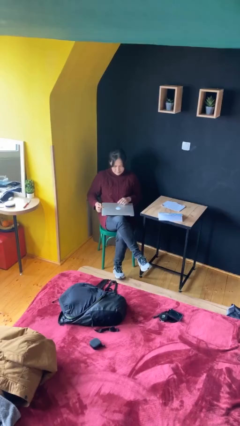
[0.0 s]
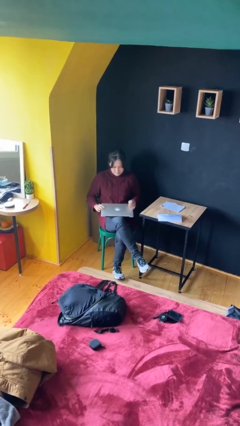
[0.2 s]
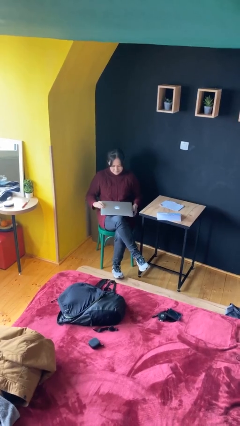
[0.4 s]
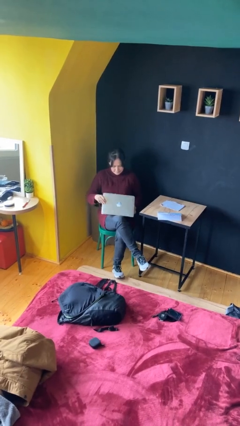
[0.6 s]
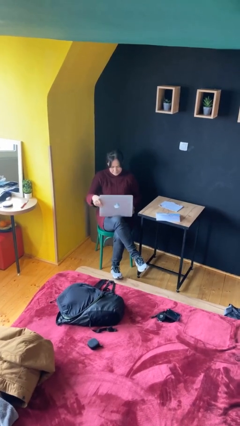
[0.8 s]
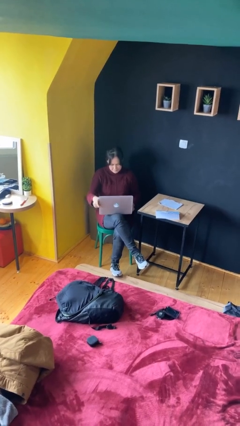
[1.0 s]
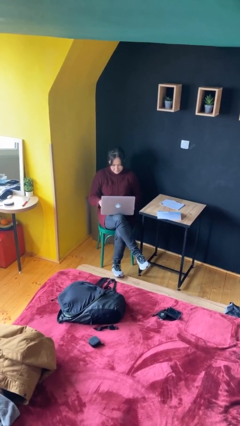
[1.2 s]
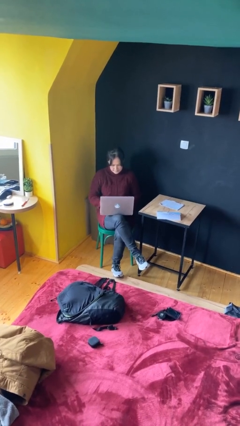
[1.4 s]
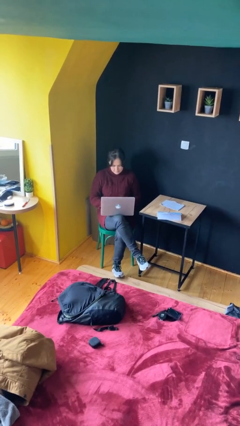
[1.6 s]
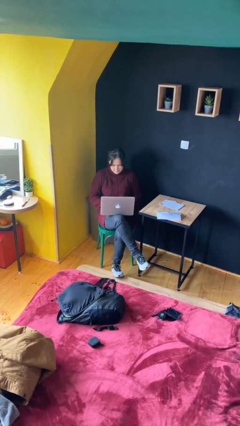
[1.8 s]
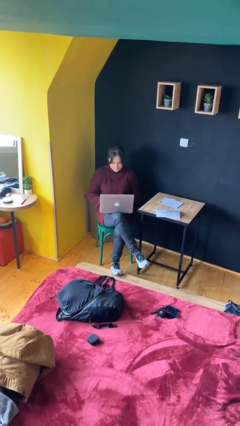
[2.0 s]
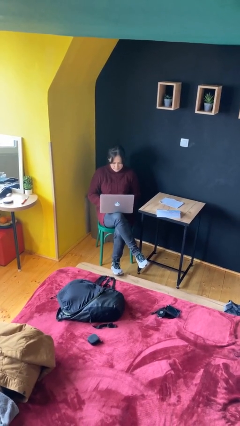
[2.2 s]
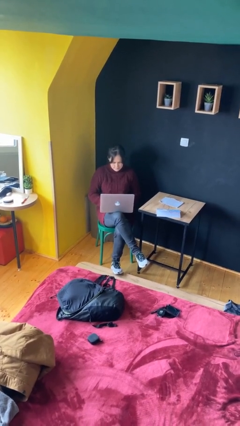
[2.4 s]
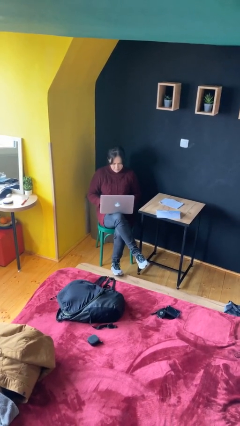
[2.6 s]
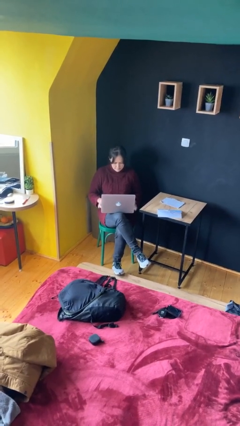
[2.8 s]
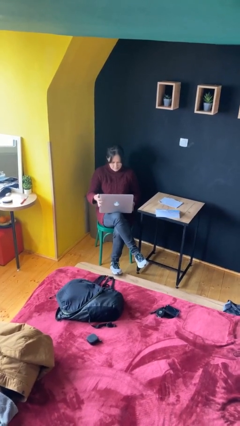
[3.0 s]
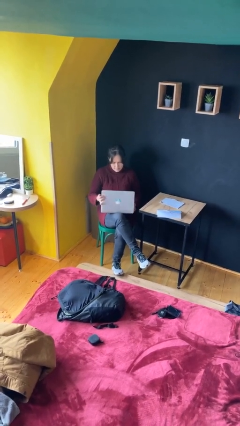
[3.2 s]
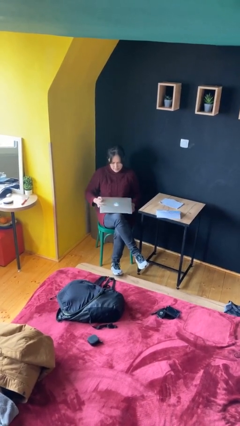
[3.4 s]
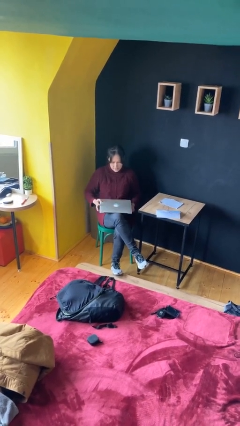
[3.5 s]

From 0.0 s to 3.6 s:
person interacts with laptop

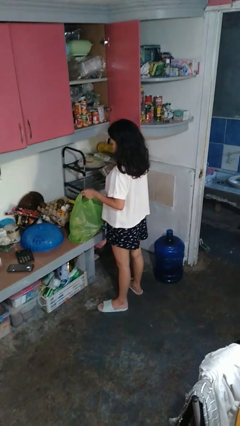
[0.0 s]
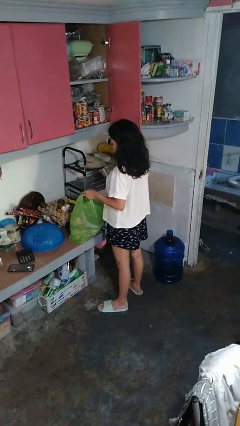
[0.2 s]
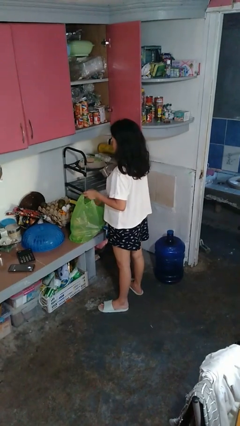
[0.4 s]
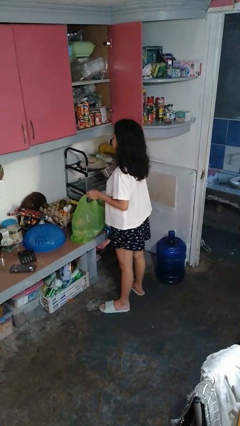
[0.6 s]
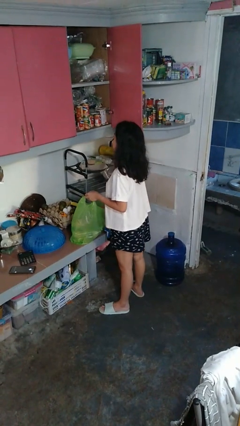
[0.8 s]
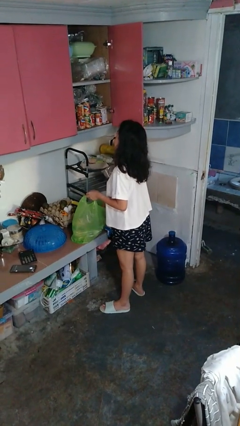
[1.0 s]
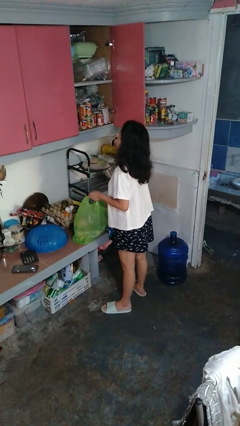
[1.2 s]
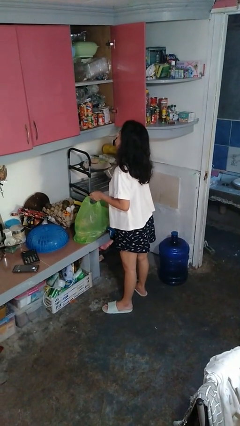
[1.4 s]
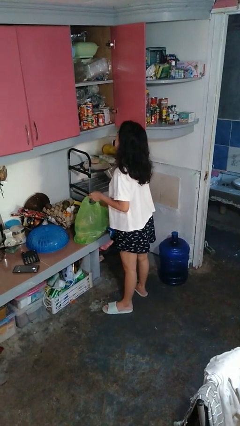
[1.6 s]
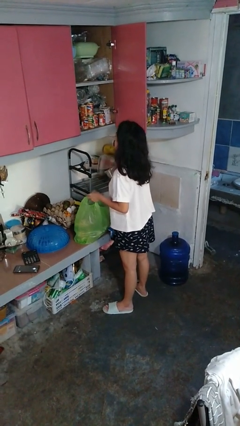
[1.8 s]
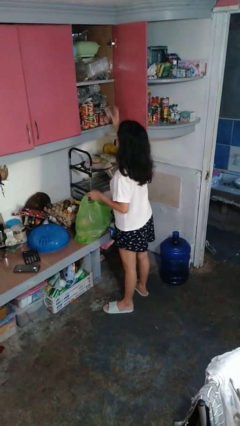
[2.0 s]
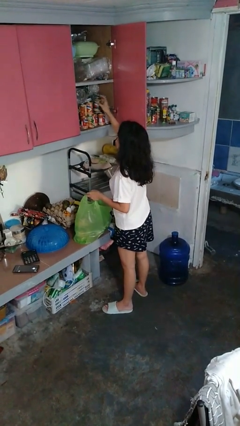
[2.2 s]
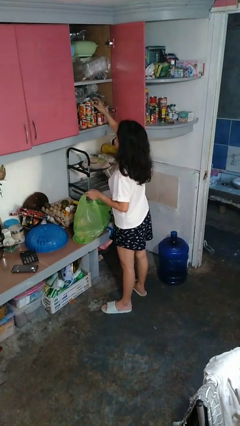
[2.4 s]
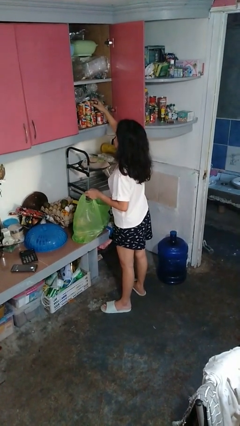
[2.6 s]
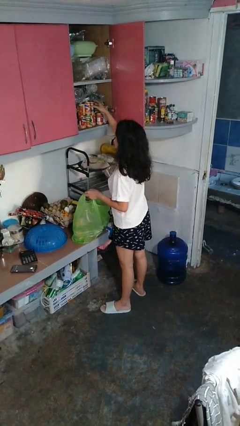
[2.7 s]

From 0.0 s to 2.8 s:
person loads groceries into cabinet

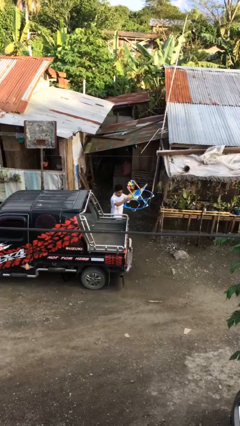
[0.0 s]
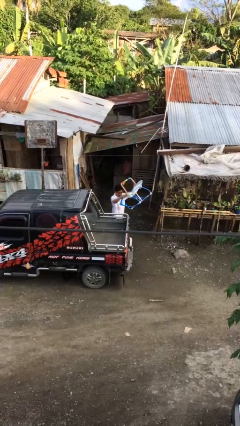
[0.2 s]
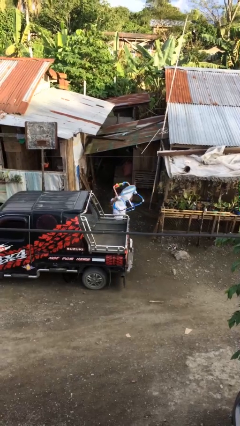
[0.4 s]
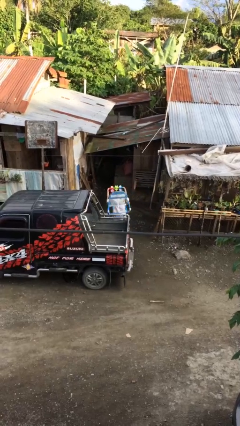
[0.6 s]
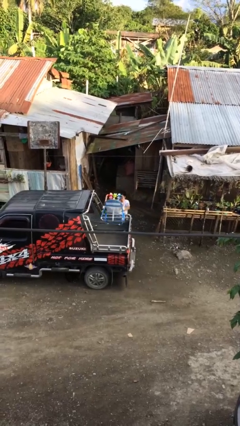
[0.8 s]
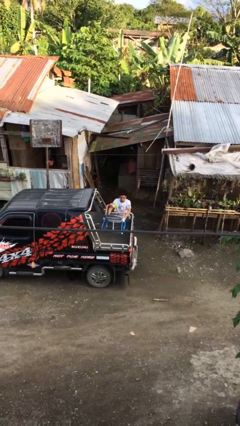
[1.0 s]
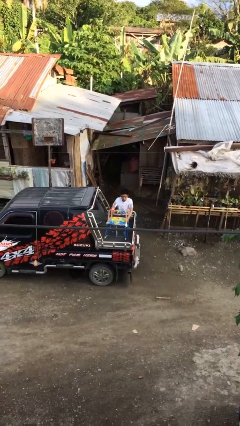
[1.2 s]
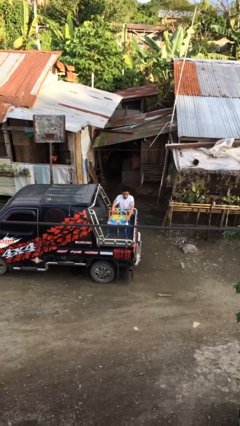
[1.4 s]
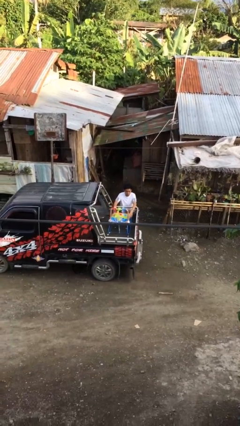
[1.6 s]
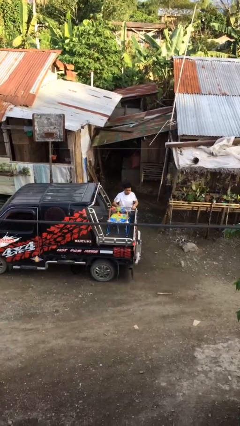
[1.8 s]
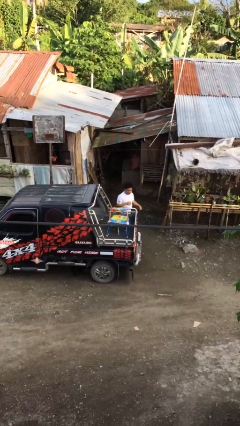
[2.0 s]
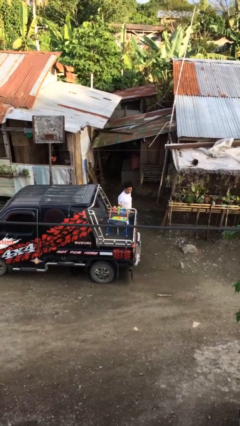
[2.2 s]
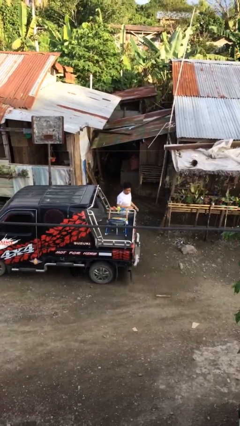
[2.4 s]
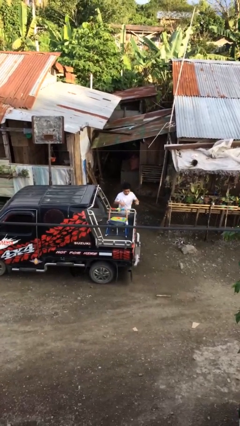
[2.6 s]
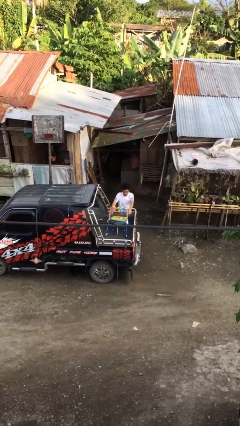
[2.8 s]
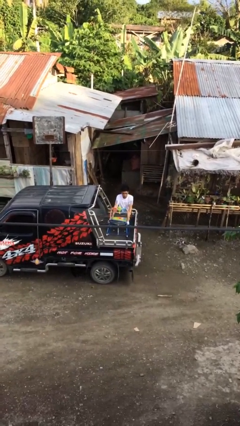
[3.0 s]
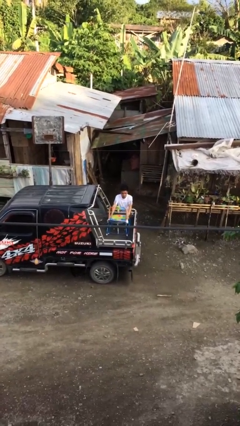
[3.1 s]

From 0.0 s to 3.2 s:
person loads car

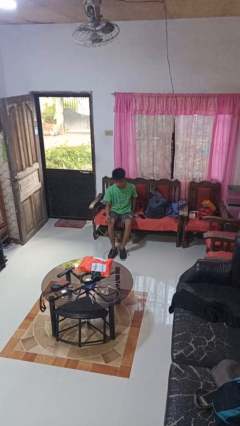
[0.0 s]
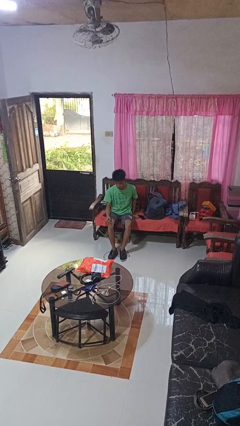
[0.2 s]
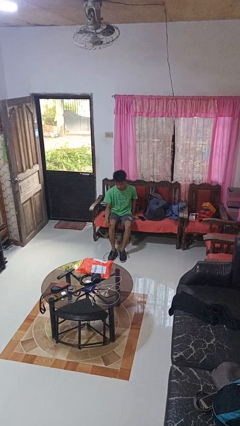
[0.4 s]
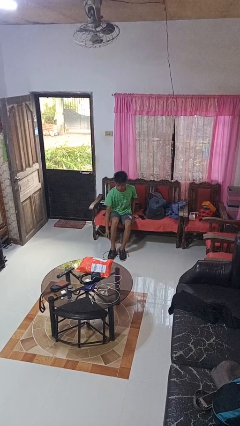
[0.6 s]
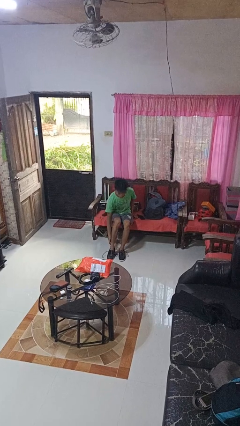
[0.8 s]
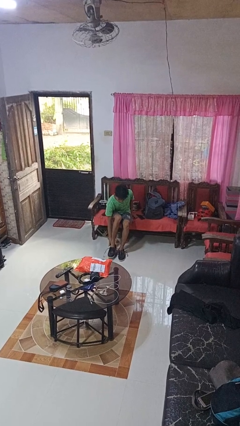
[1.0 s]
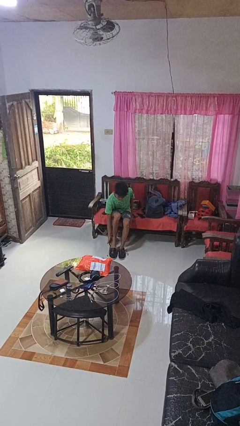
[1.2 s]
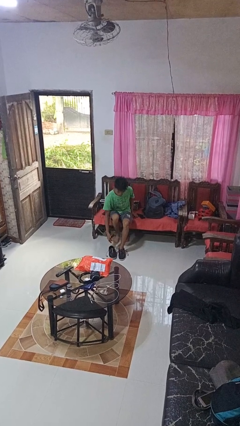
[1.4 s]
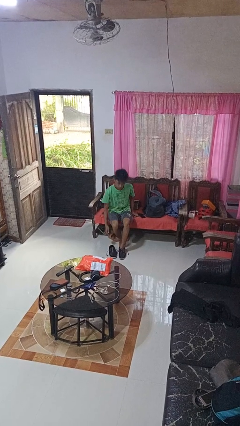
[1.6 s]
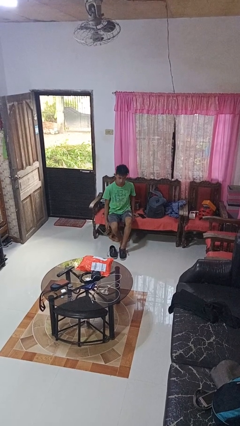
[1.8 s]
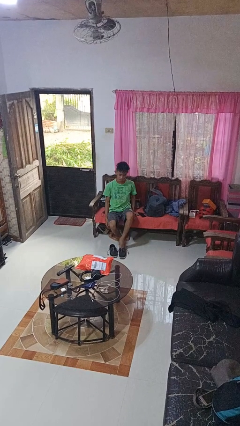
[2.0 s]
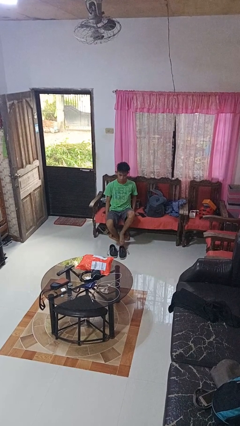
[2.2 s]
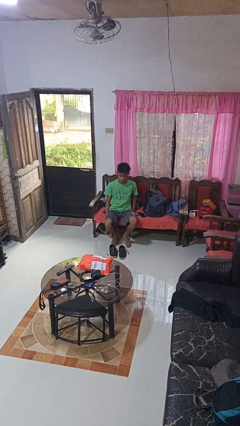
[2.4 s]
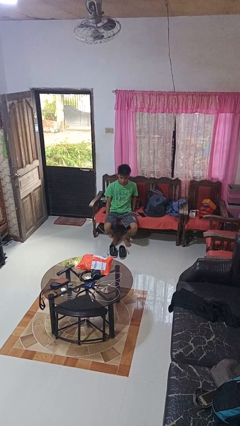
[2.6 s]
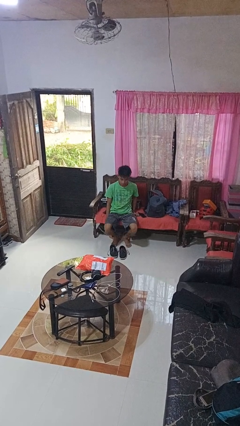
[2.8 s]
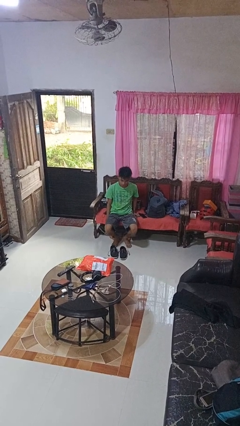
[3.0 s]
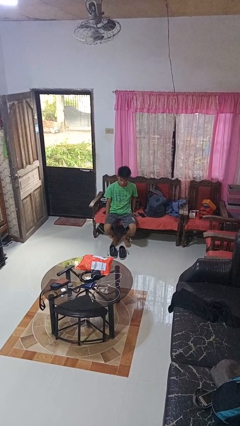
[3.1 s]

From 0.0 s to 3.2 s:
person takes off shoes

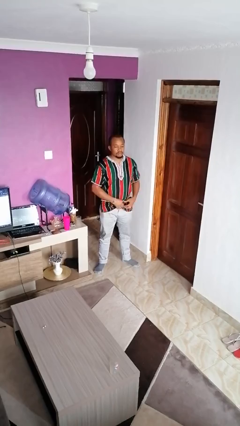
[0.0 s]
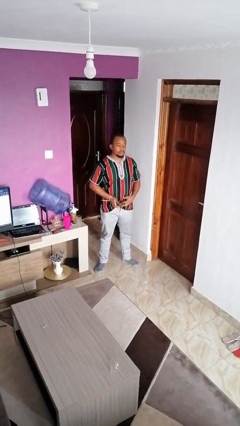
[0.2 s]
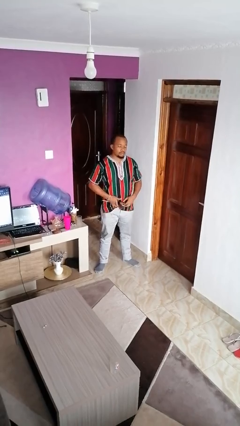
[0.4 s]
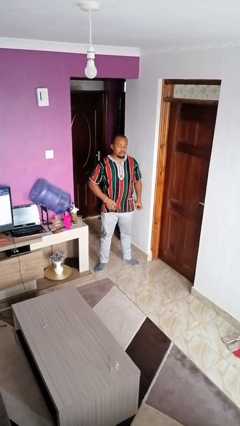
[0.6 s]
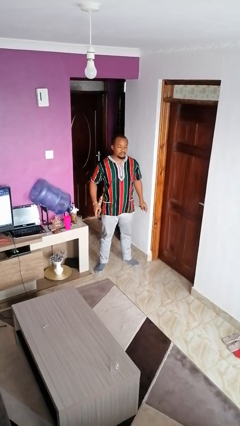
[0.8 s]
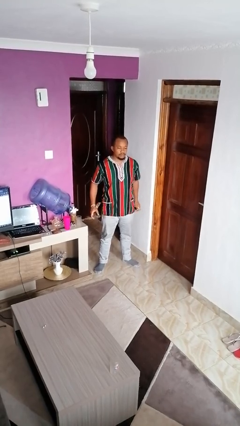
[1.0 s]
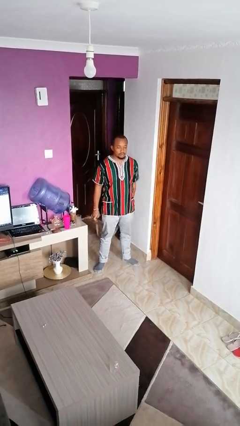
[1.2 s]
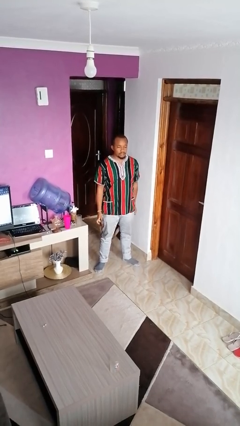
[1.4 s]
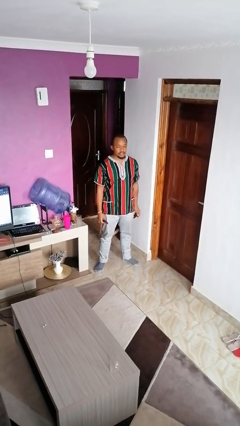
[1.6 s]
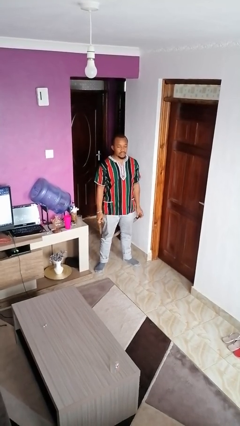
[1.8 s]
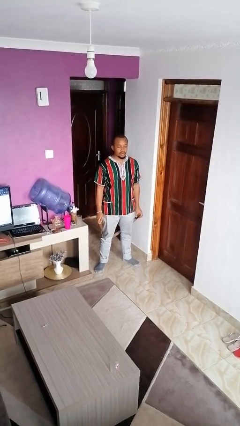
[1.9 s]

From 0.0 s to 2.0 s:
person takes off belt

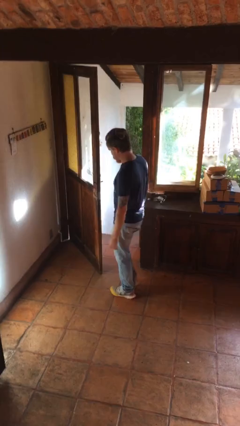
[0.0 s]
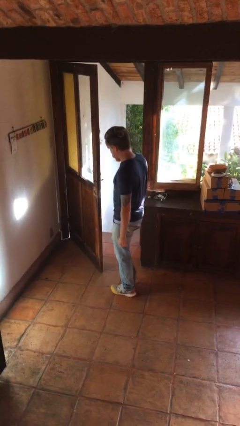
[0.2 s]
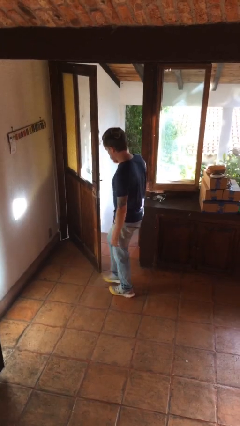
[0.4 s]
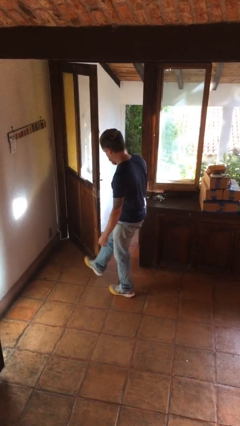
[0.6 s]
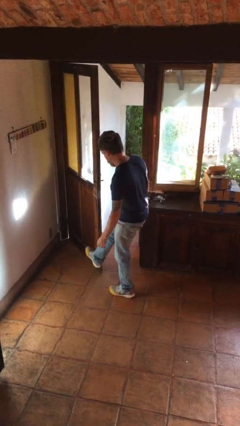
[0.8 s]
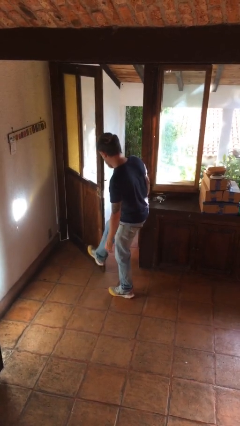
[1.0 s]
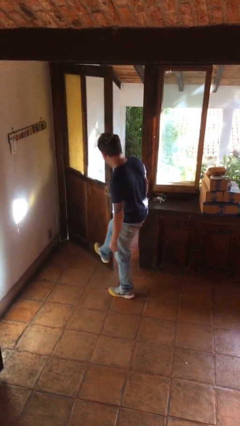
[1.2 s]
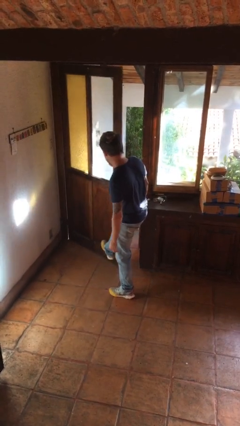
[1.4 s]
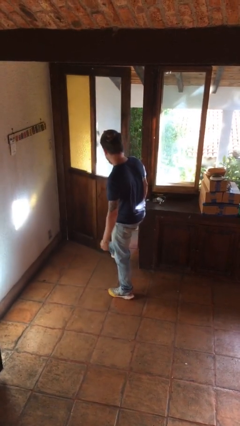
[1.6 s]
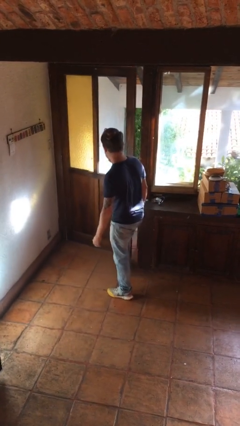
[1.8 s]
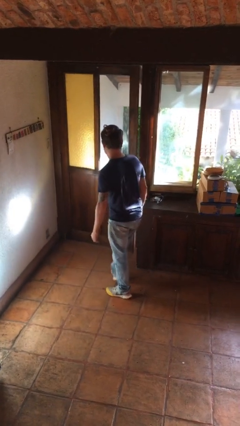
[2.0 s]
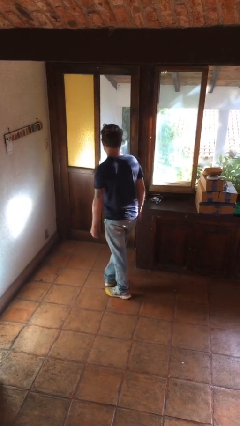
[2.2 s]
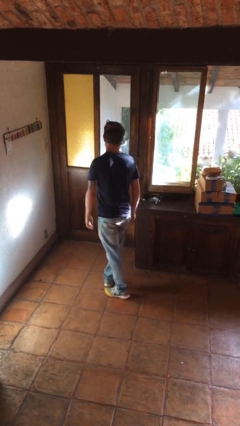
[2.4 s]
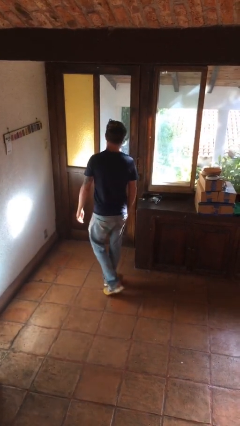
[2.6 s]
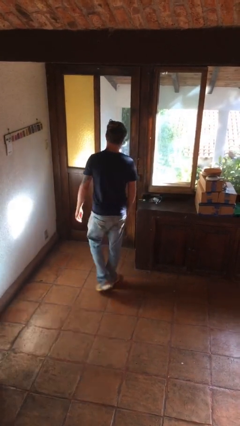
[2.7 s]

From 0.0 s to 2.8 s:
person closes door with foot

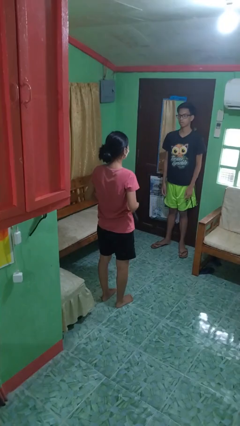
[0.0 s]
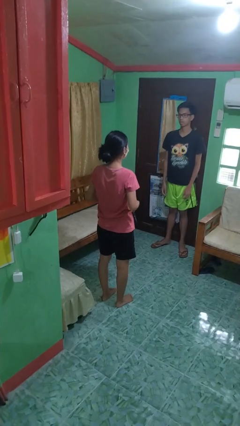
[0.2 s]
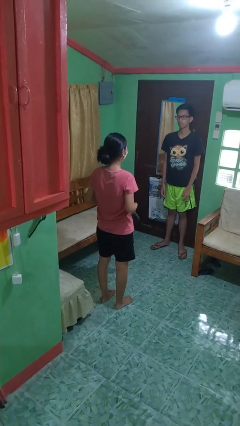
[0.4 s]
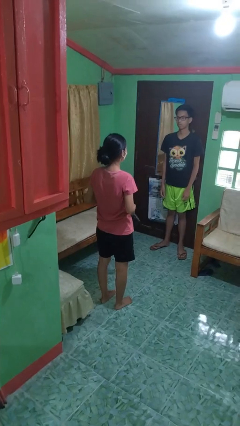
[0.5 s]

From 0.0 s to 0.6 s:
person throws object to person
